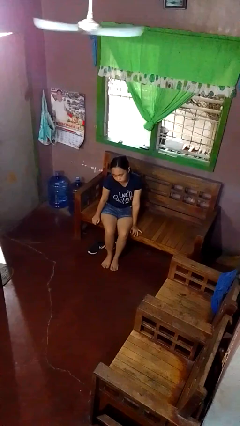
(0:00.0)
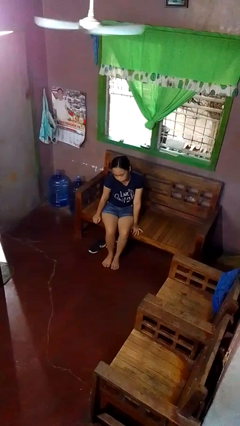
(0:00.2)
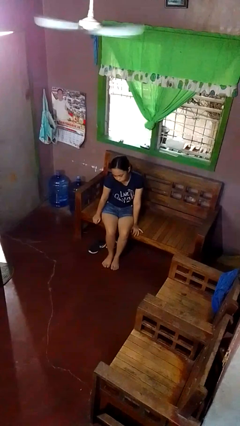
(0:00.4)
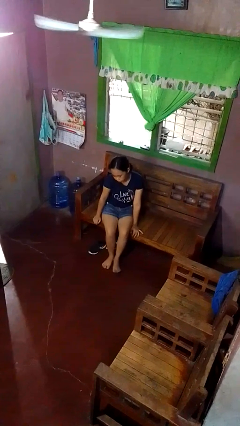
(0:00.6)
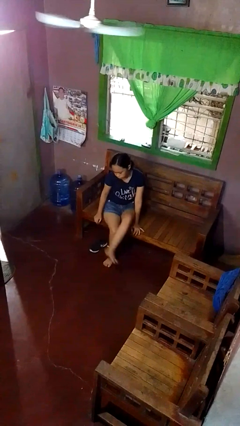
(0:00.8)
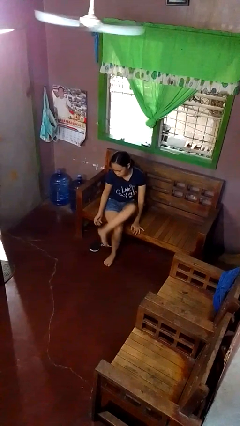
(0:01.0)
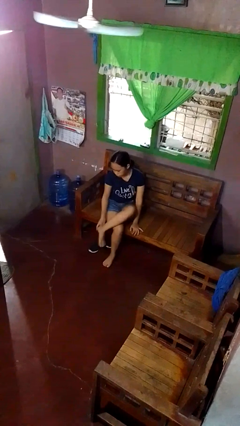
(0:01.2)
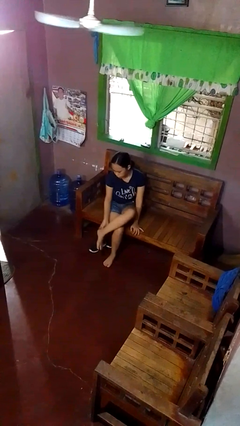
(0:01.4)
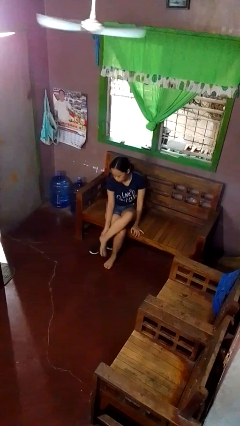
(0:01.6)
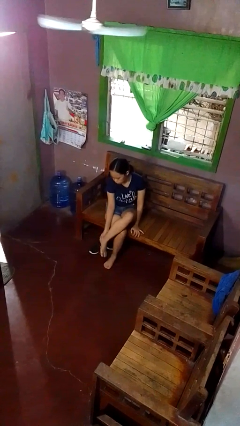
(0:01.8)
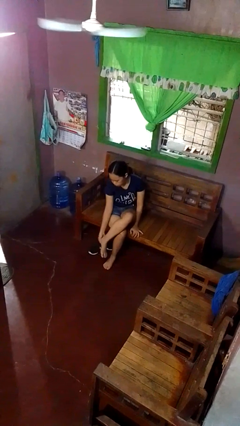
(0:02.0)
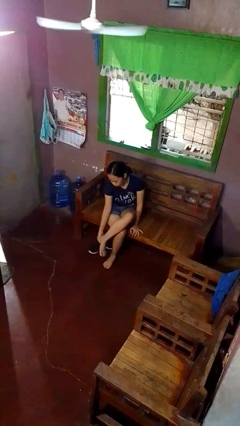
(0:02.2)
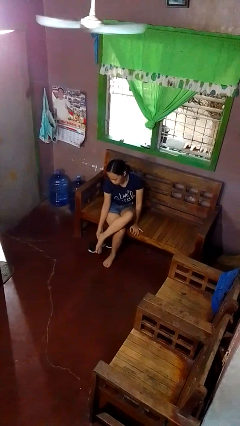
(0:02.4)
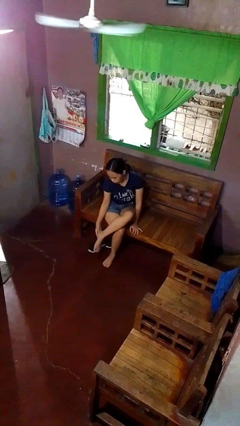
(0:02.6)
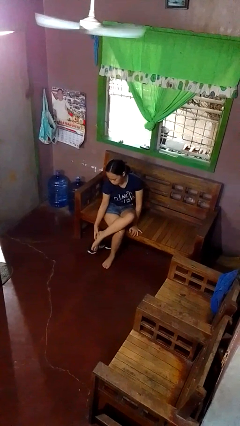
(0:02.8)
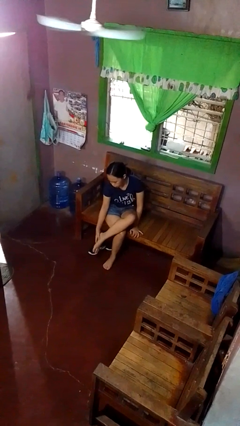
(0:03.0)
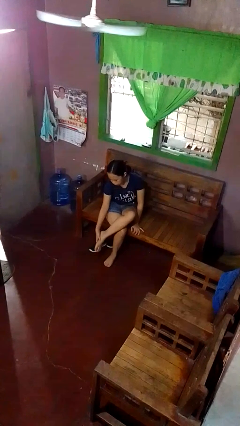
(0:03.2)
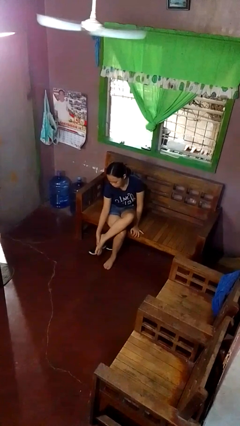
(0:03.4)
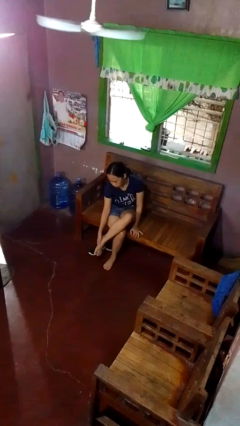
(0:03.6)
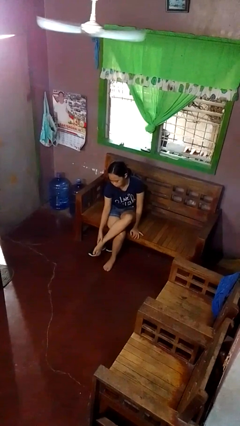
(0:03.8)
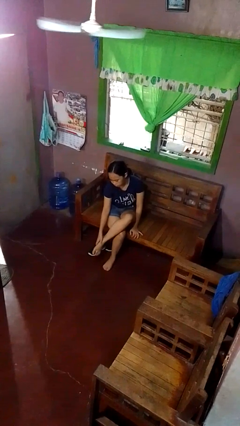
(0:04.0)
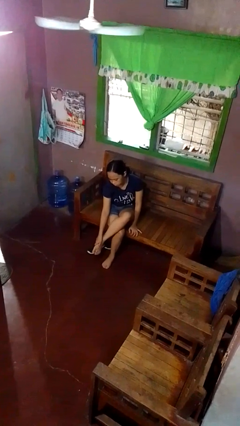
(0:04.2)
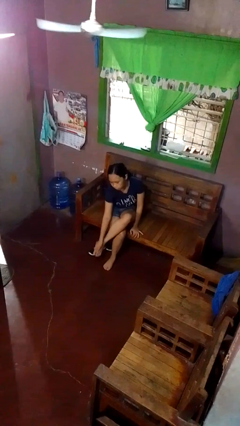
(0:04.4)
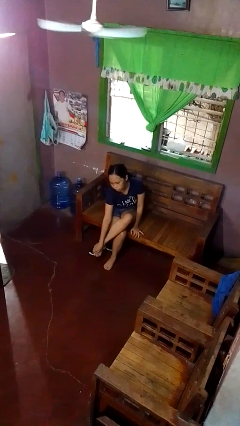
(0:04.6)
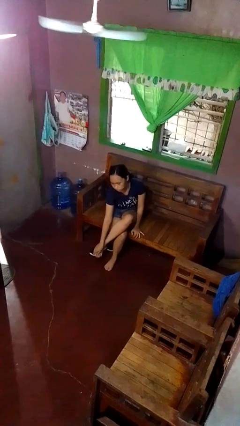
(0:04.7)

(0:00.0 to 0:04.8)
person rubs foot

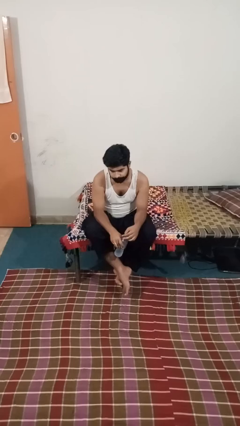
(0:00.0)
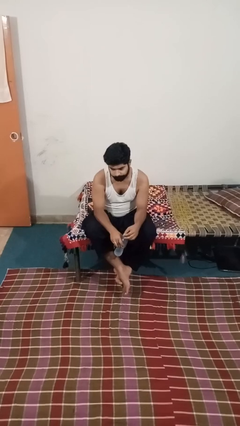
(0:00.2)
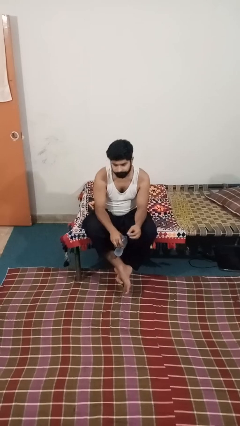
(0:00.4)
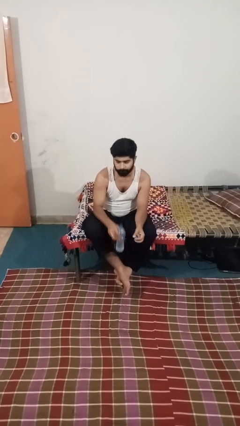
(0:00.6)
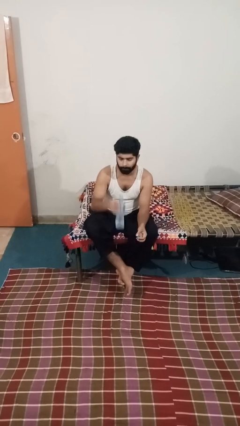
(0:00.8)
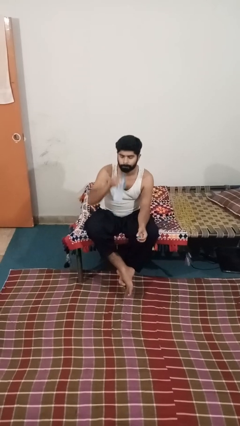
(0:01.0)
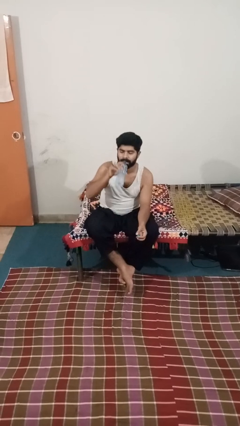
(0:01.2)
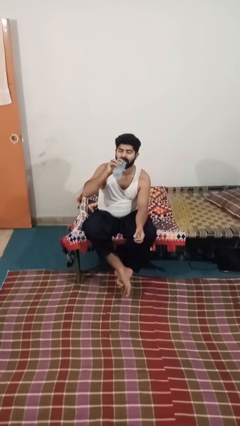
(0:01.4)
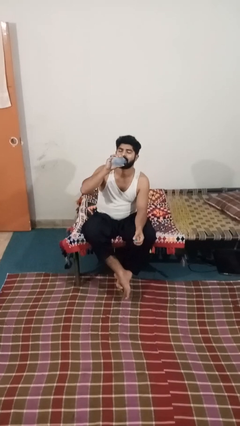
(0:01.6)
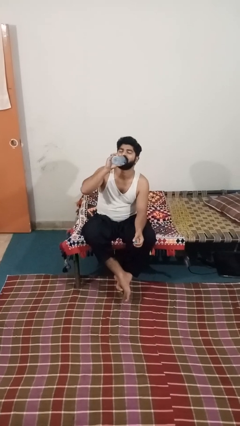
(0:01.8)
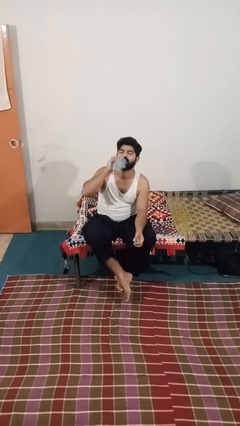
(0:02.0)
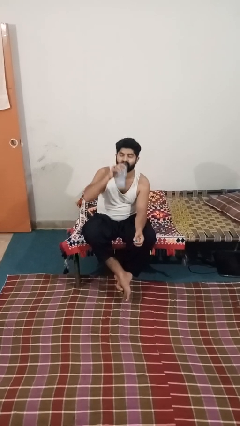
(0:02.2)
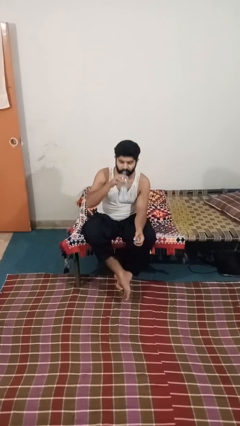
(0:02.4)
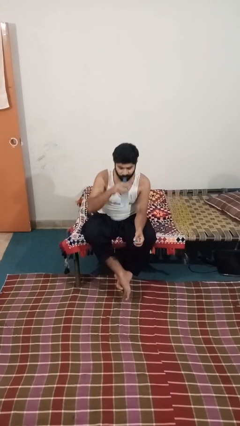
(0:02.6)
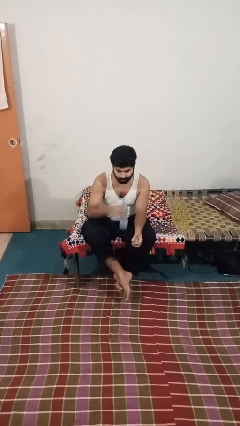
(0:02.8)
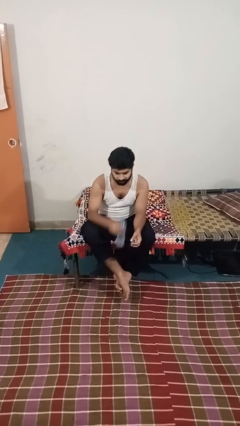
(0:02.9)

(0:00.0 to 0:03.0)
person drinks from bottle

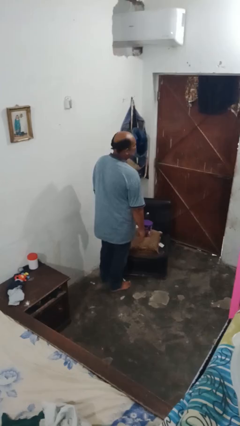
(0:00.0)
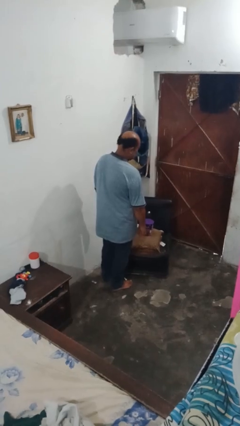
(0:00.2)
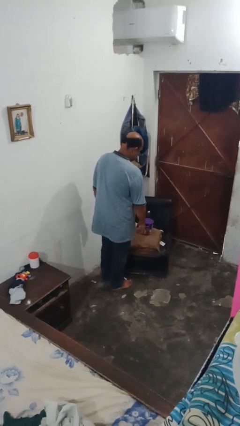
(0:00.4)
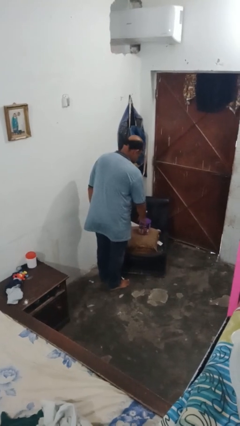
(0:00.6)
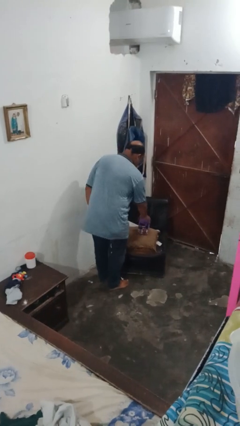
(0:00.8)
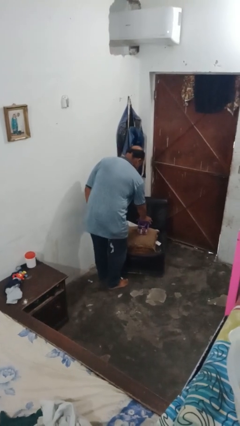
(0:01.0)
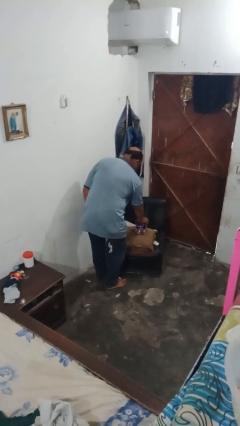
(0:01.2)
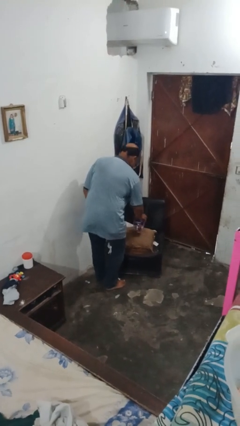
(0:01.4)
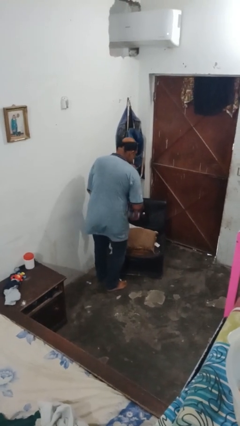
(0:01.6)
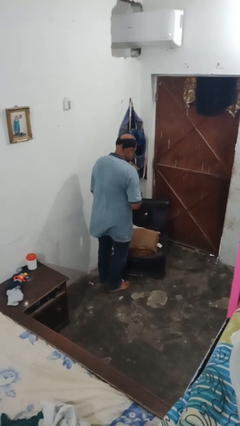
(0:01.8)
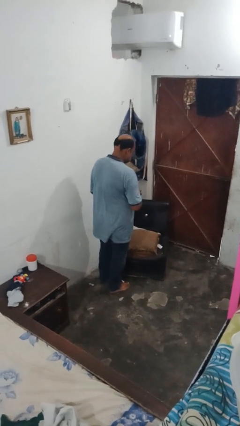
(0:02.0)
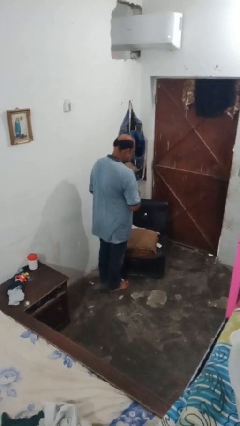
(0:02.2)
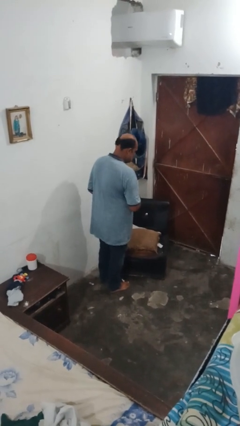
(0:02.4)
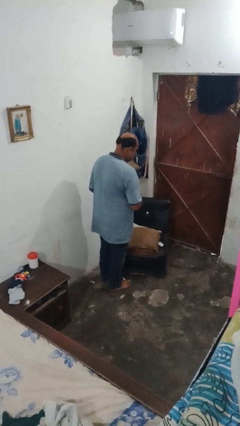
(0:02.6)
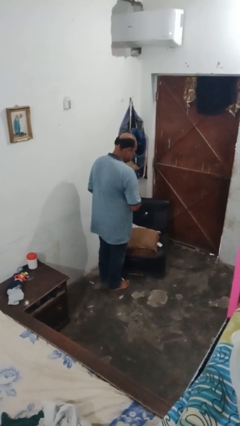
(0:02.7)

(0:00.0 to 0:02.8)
person picks up object from couch

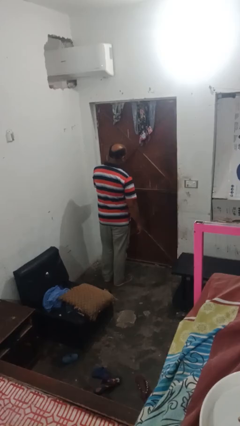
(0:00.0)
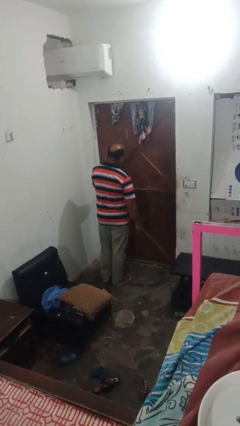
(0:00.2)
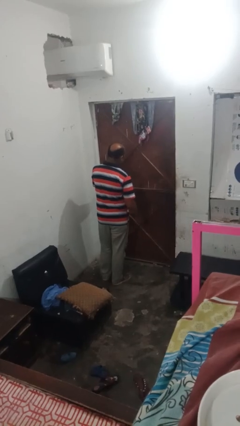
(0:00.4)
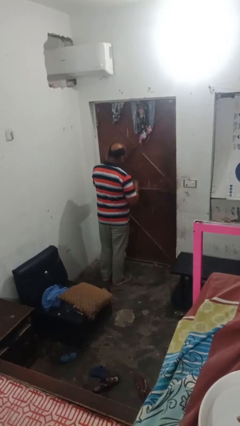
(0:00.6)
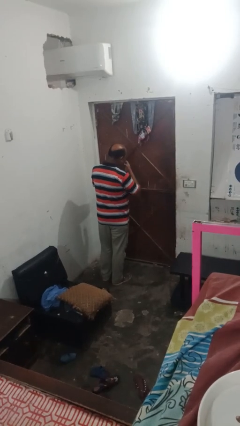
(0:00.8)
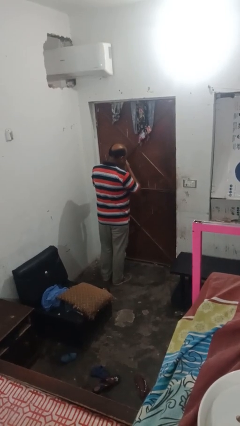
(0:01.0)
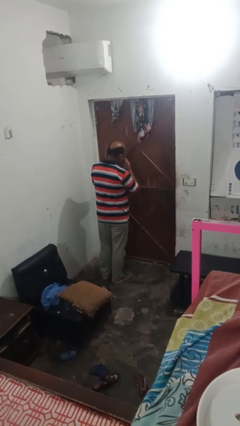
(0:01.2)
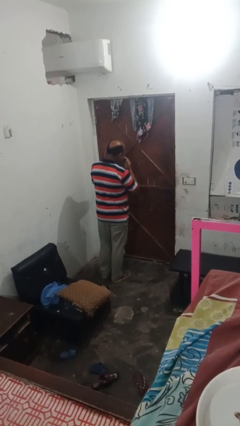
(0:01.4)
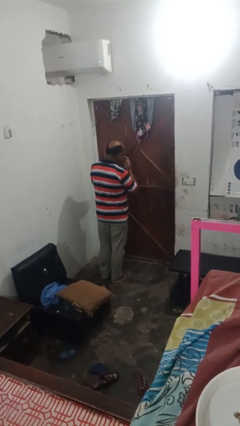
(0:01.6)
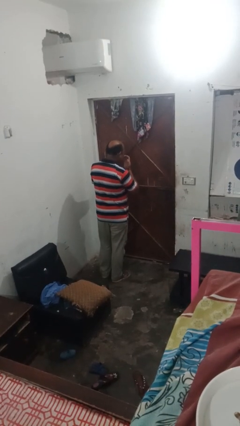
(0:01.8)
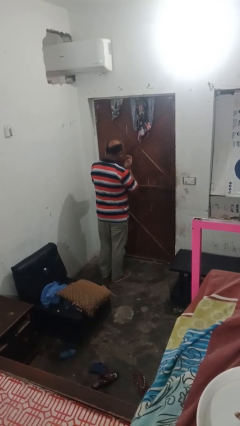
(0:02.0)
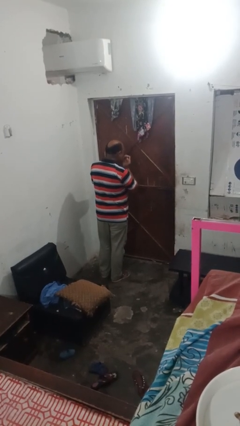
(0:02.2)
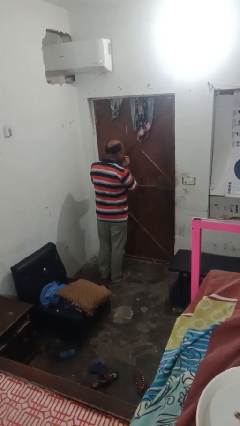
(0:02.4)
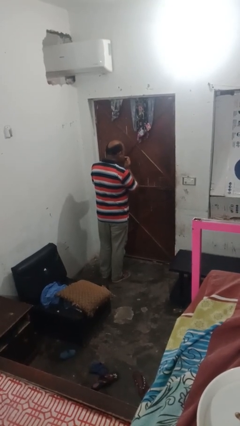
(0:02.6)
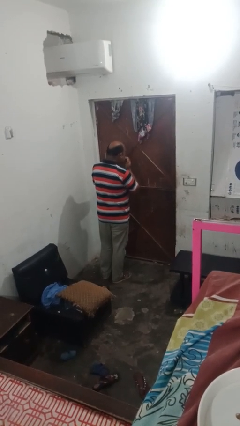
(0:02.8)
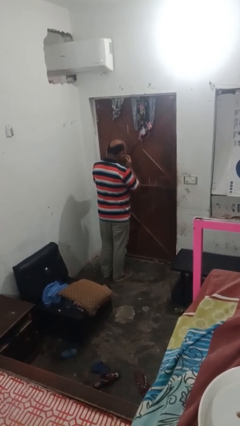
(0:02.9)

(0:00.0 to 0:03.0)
person licks fingers

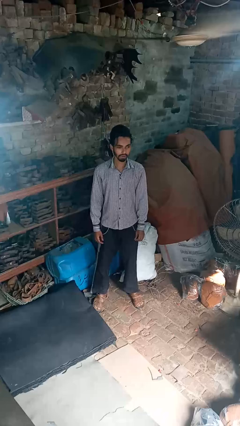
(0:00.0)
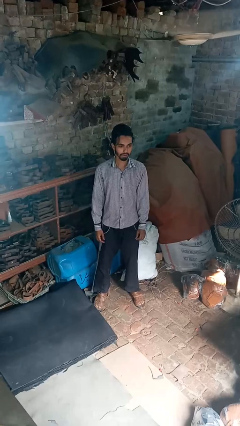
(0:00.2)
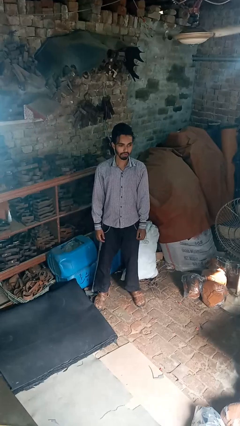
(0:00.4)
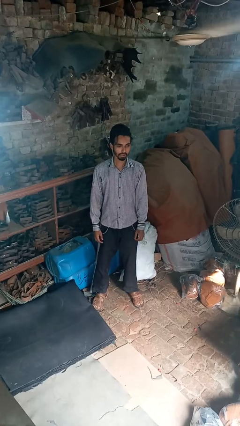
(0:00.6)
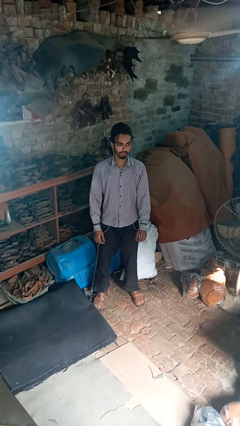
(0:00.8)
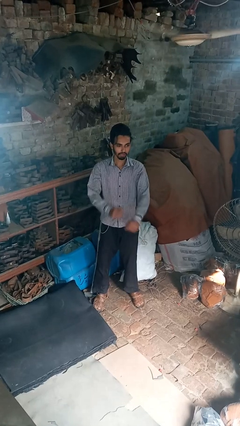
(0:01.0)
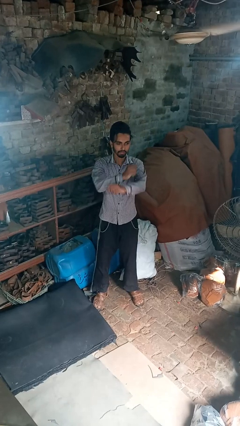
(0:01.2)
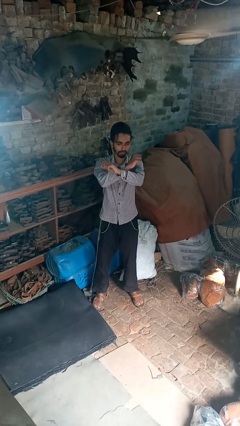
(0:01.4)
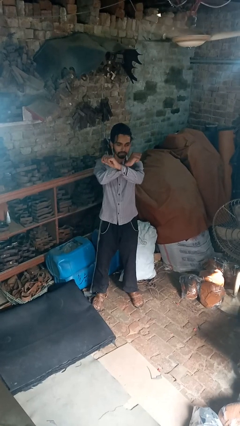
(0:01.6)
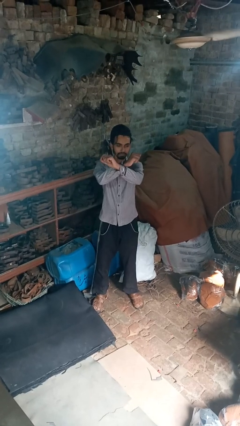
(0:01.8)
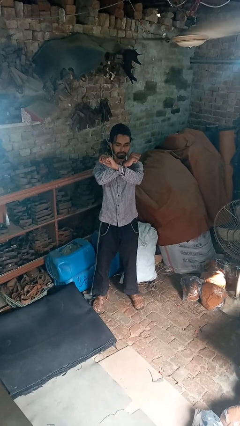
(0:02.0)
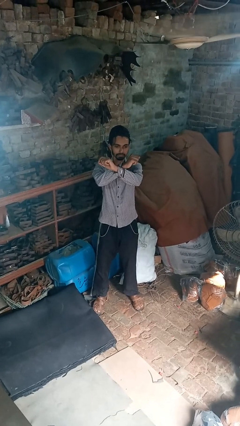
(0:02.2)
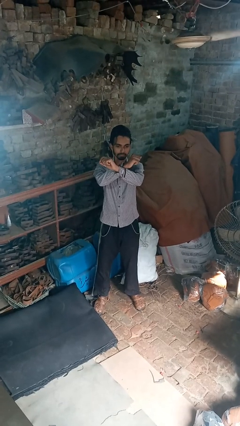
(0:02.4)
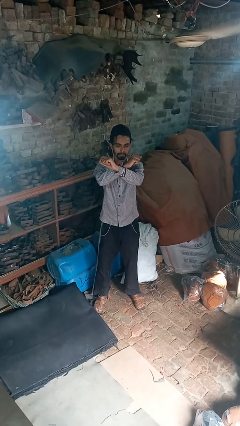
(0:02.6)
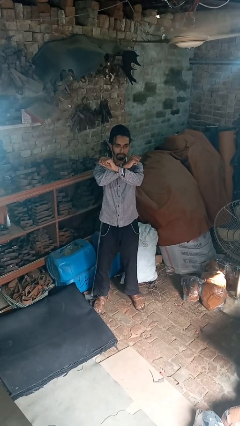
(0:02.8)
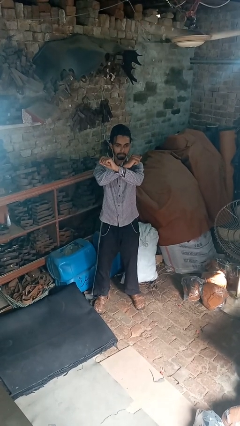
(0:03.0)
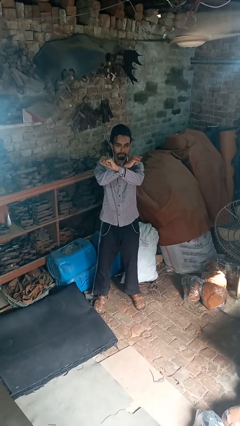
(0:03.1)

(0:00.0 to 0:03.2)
person crosses arms

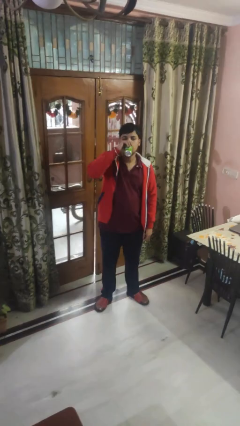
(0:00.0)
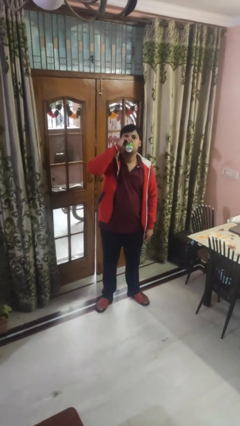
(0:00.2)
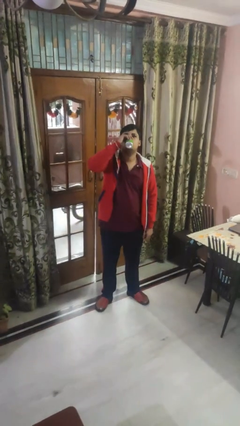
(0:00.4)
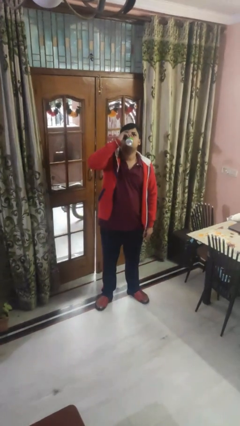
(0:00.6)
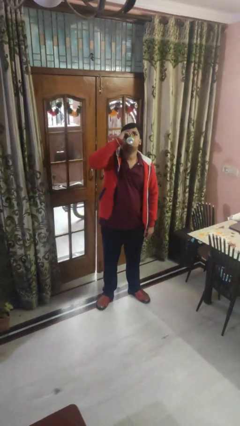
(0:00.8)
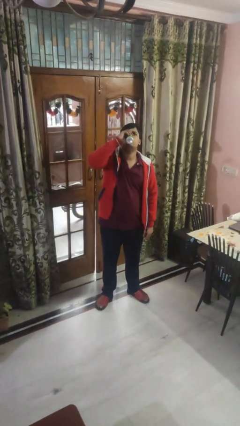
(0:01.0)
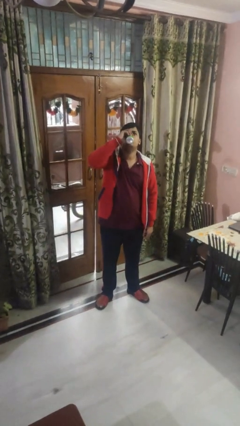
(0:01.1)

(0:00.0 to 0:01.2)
person drinks from beverage can
